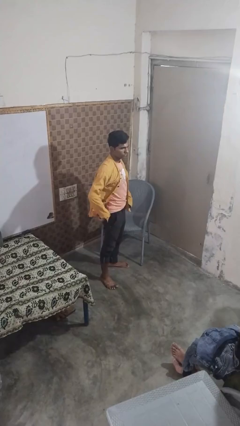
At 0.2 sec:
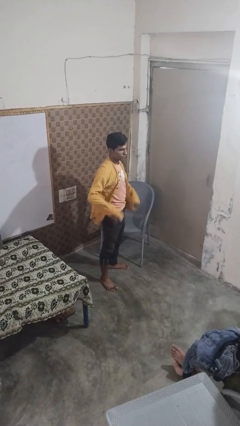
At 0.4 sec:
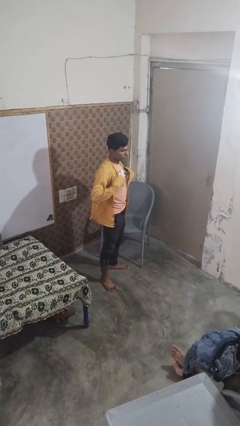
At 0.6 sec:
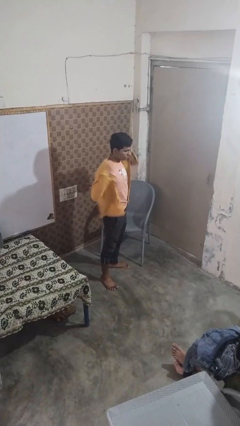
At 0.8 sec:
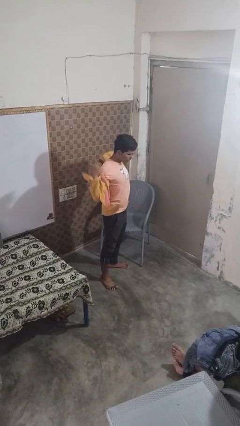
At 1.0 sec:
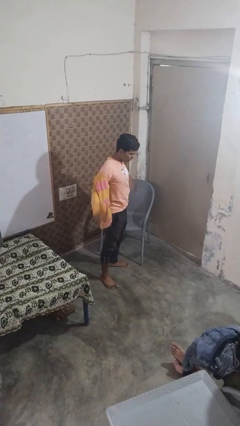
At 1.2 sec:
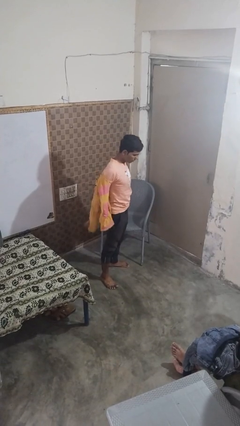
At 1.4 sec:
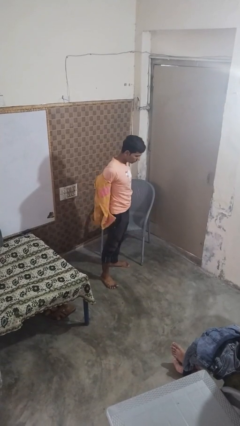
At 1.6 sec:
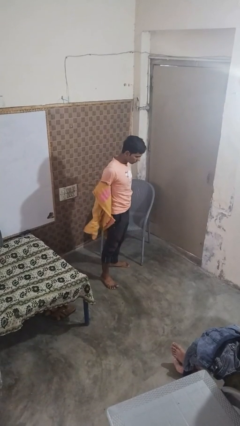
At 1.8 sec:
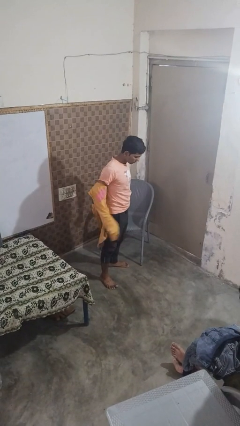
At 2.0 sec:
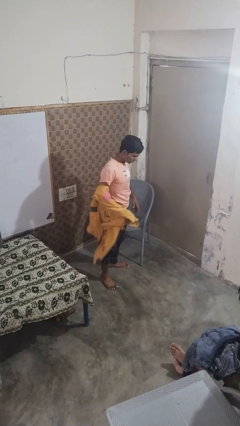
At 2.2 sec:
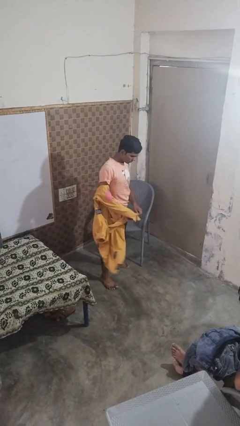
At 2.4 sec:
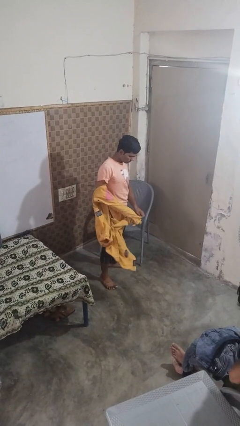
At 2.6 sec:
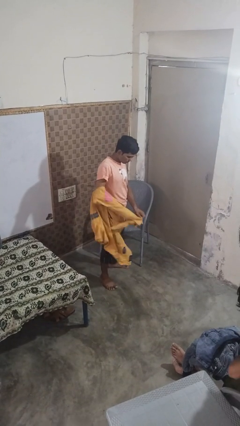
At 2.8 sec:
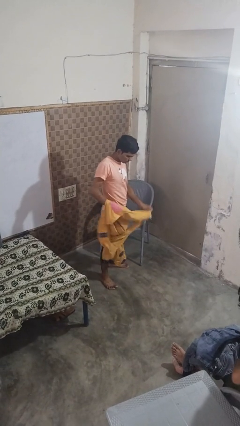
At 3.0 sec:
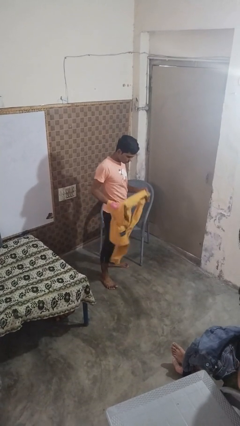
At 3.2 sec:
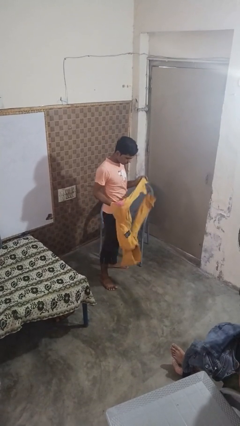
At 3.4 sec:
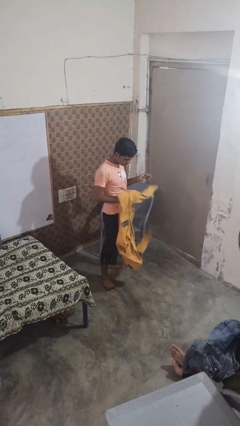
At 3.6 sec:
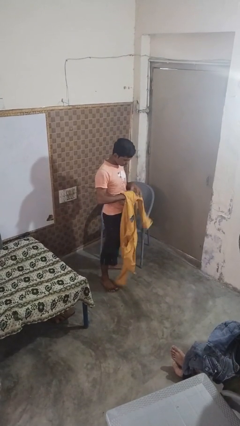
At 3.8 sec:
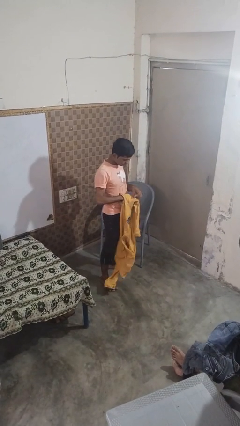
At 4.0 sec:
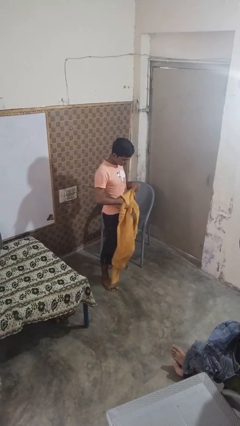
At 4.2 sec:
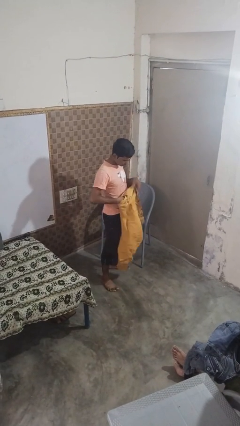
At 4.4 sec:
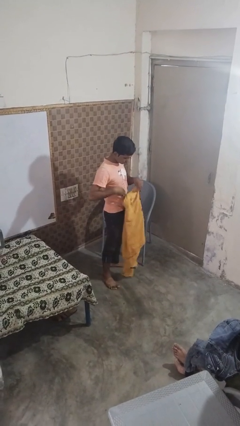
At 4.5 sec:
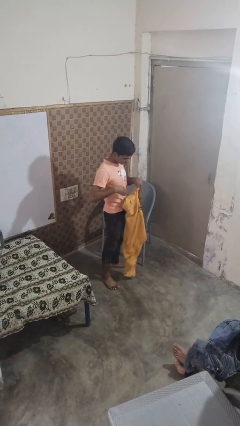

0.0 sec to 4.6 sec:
person takes off shirt

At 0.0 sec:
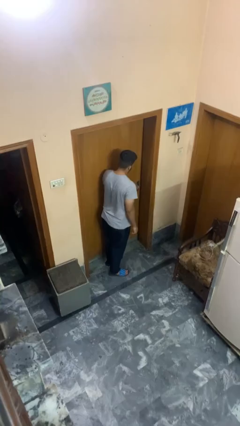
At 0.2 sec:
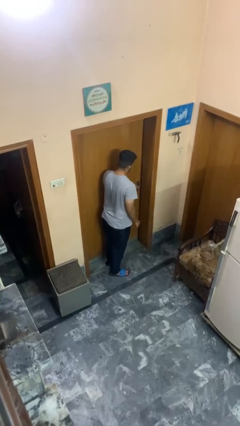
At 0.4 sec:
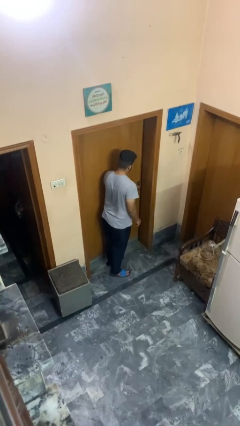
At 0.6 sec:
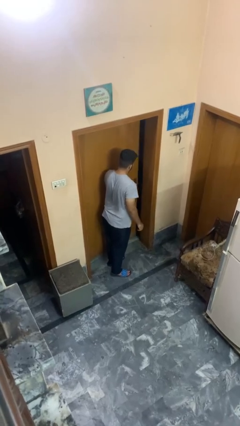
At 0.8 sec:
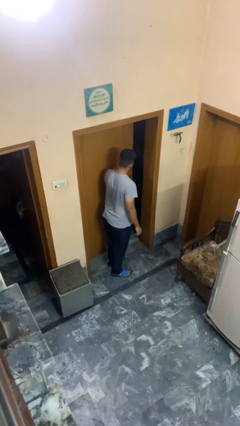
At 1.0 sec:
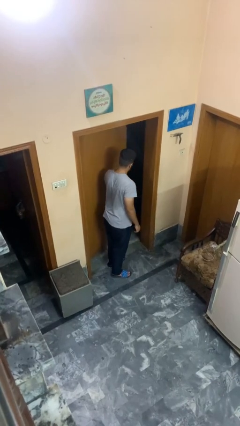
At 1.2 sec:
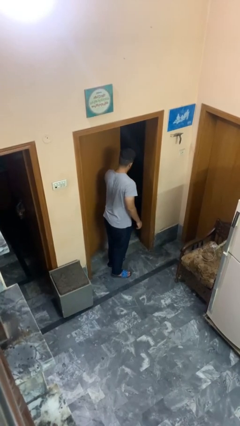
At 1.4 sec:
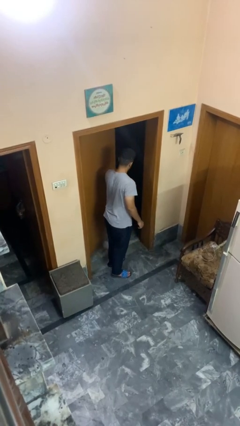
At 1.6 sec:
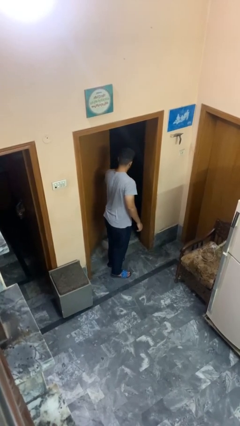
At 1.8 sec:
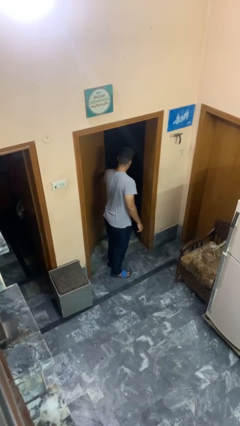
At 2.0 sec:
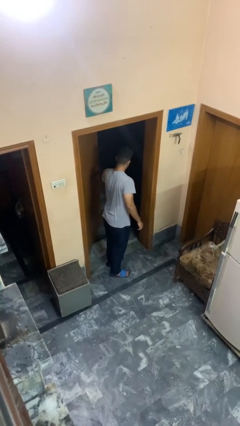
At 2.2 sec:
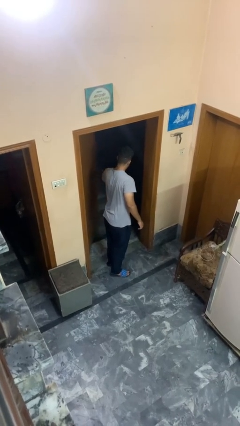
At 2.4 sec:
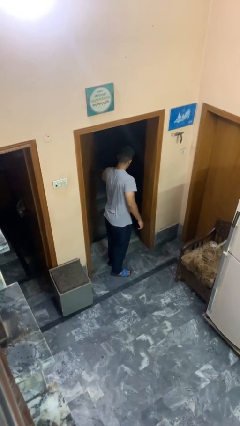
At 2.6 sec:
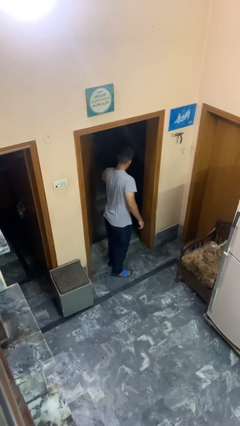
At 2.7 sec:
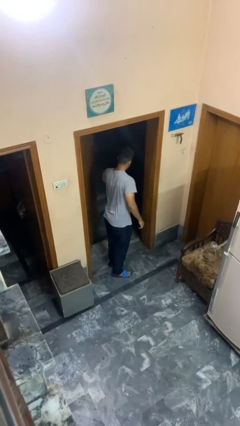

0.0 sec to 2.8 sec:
person opens facility door

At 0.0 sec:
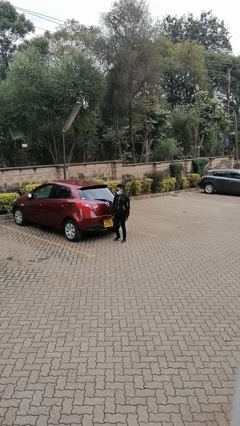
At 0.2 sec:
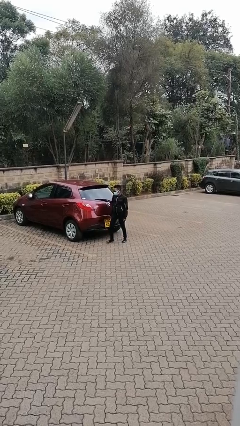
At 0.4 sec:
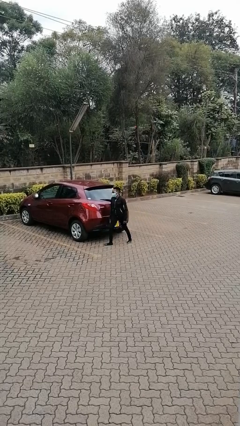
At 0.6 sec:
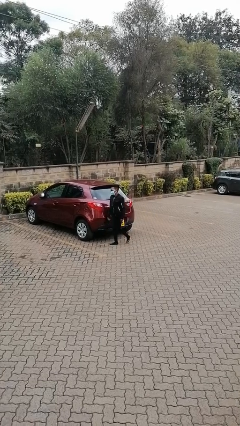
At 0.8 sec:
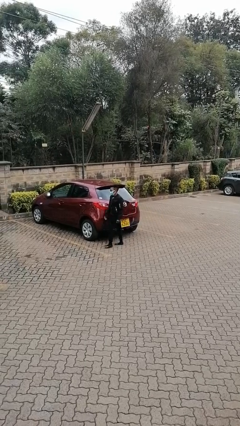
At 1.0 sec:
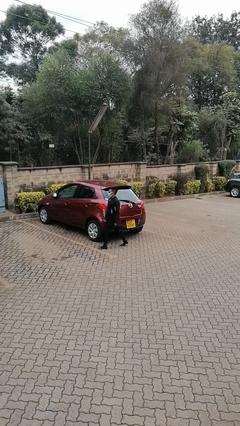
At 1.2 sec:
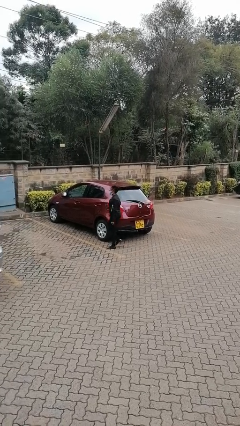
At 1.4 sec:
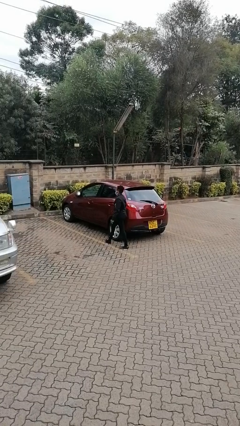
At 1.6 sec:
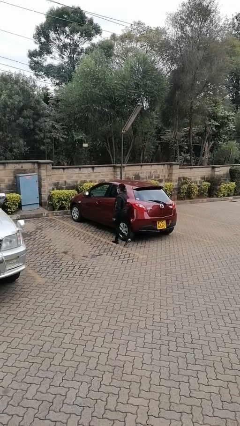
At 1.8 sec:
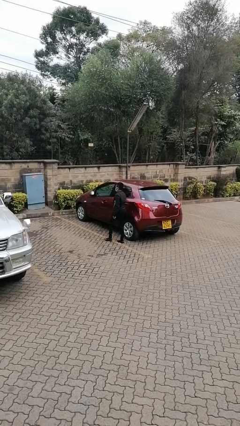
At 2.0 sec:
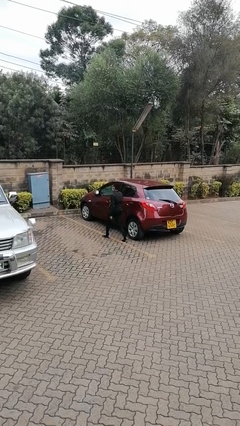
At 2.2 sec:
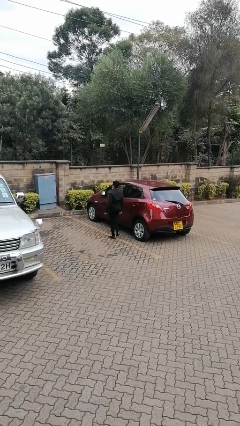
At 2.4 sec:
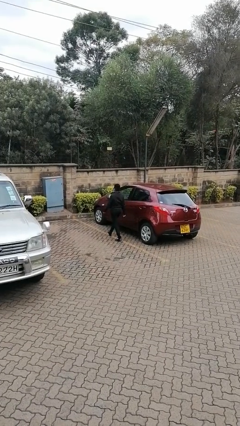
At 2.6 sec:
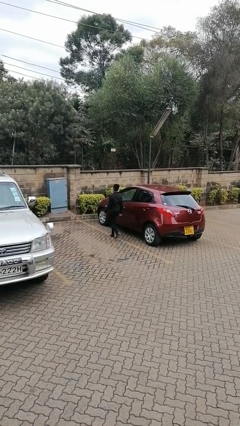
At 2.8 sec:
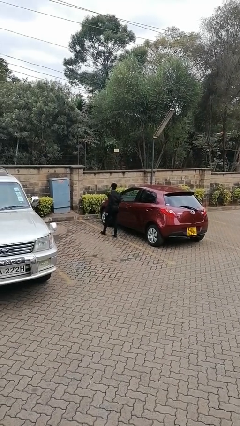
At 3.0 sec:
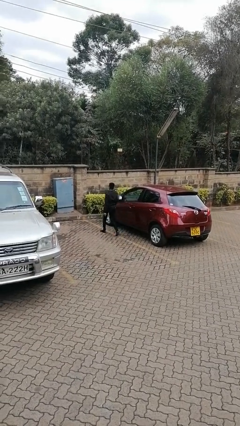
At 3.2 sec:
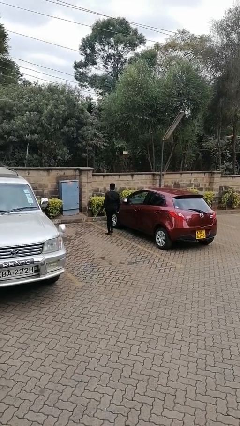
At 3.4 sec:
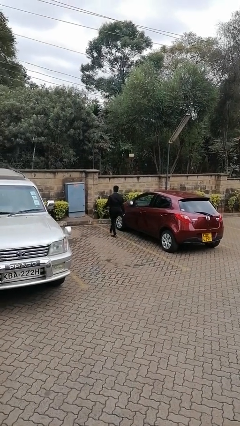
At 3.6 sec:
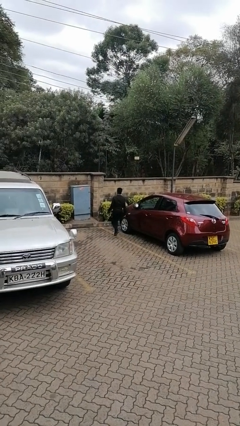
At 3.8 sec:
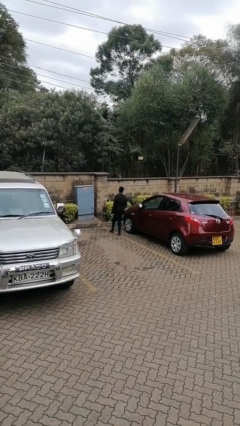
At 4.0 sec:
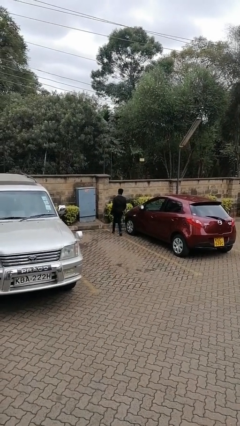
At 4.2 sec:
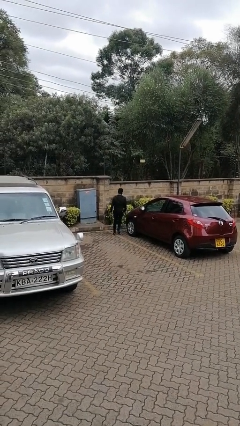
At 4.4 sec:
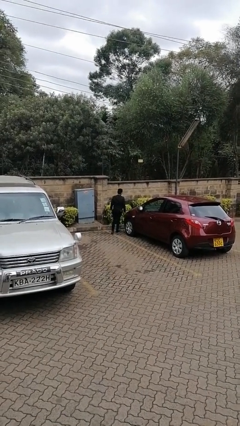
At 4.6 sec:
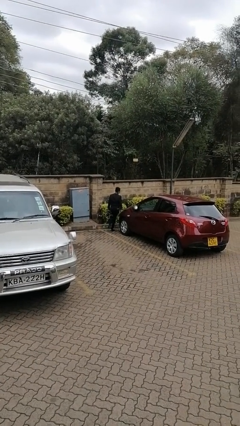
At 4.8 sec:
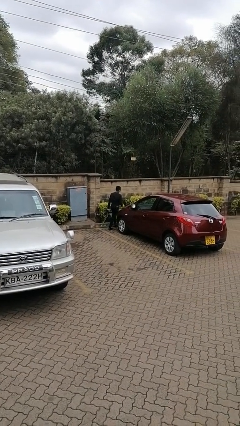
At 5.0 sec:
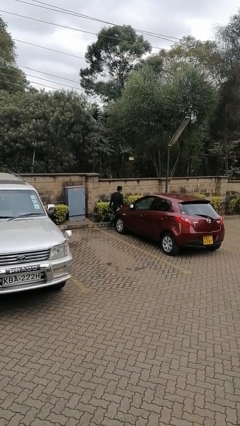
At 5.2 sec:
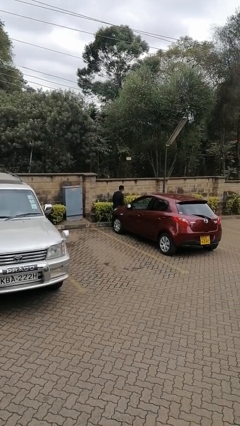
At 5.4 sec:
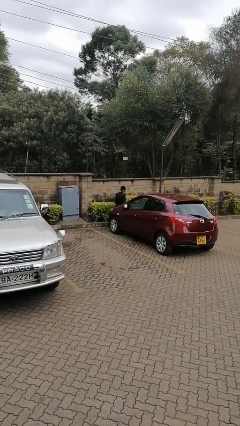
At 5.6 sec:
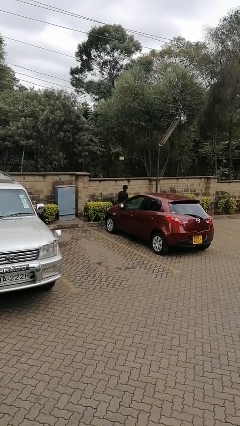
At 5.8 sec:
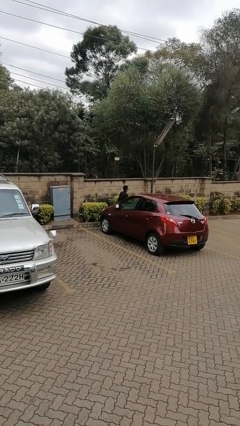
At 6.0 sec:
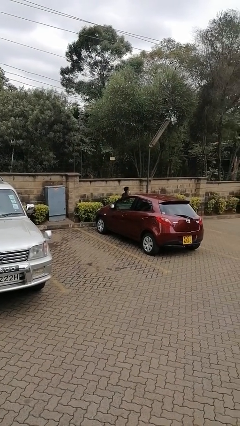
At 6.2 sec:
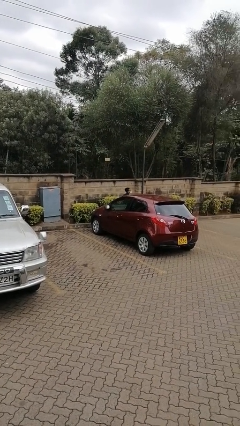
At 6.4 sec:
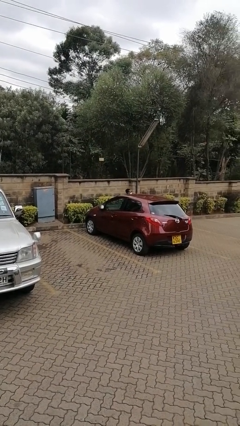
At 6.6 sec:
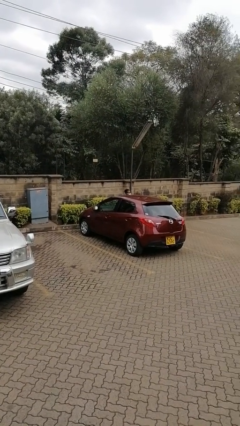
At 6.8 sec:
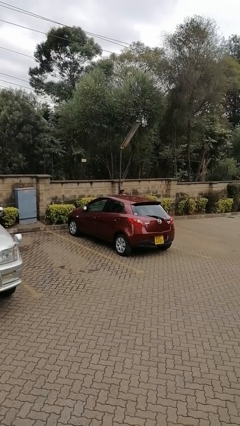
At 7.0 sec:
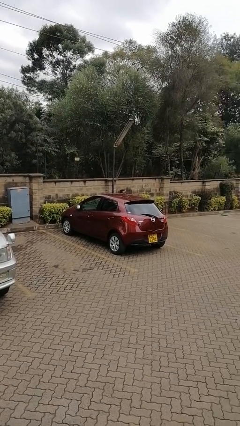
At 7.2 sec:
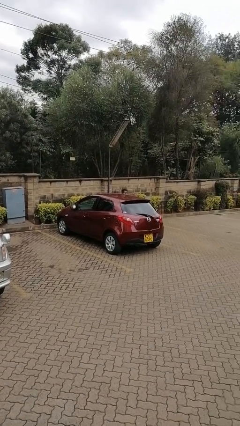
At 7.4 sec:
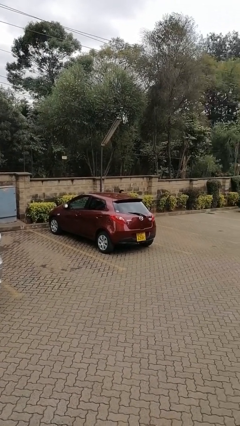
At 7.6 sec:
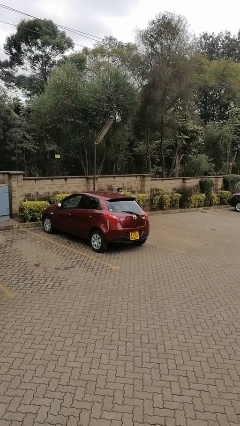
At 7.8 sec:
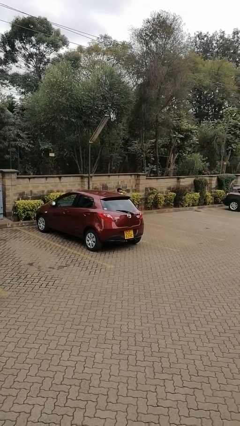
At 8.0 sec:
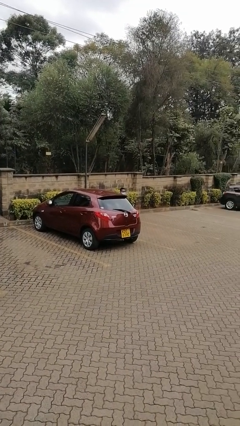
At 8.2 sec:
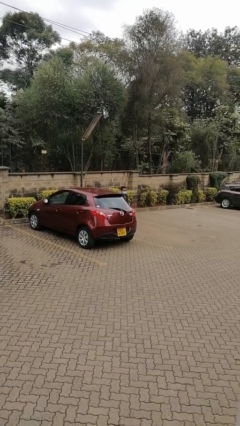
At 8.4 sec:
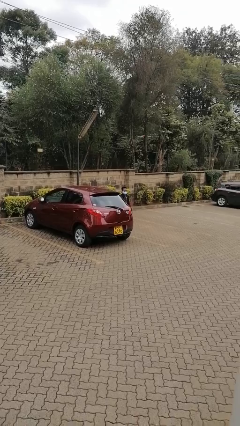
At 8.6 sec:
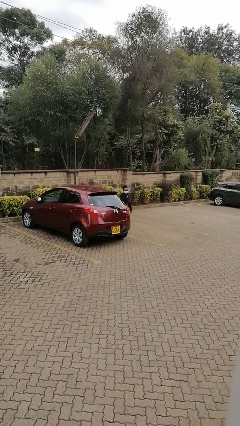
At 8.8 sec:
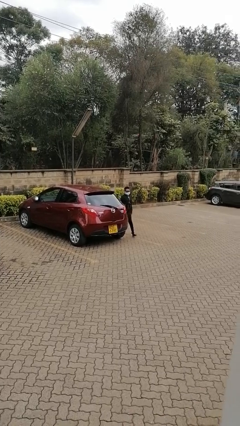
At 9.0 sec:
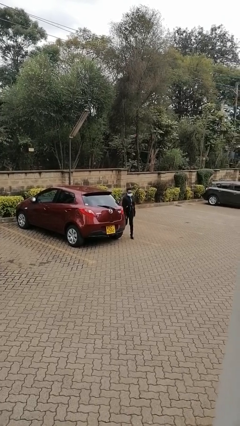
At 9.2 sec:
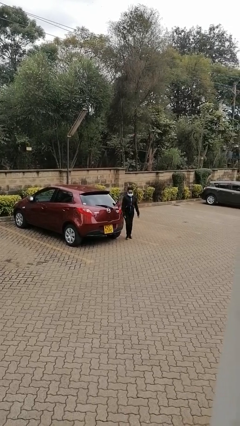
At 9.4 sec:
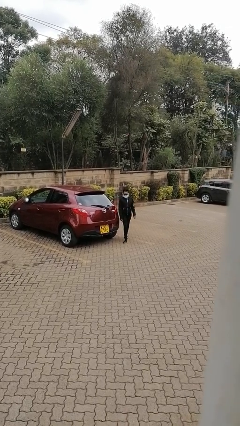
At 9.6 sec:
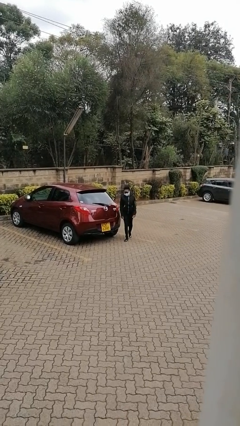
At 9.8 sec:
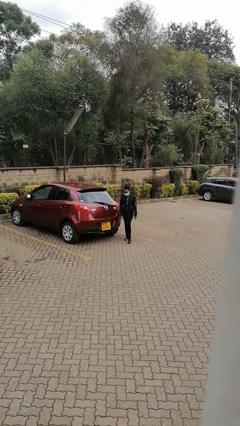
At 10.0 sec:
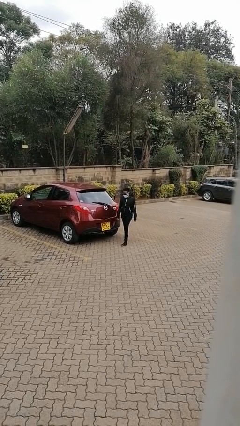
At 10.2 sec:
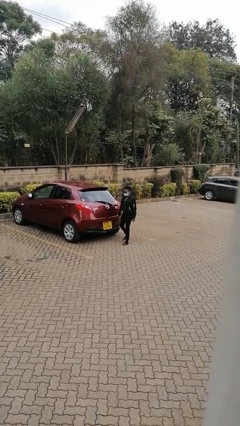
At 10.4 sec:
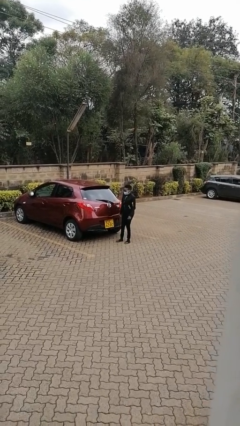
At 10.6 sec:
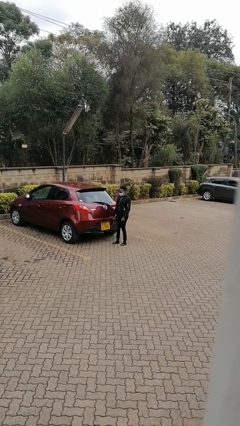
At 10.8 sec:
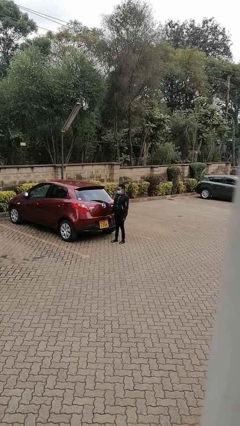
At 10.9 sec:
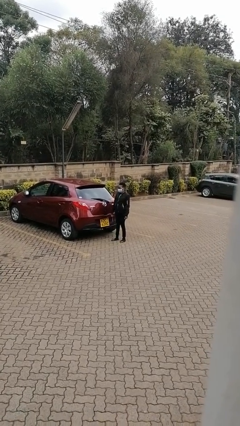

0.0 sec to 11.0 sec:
person walks around car
